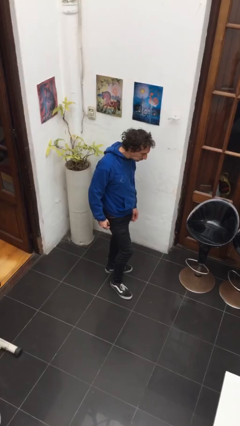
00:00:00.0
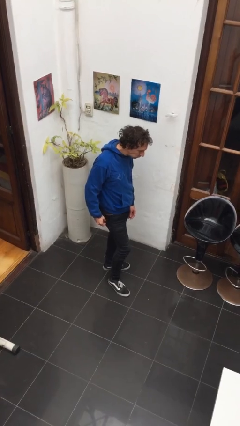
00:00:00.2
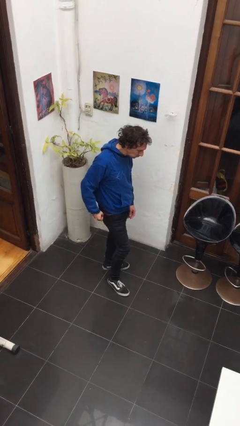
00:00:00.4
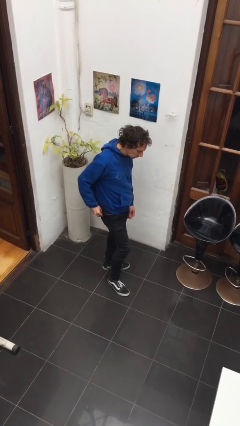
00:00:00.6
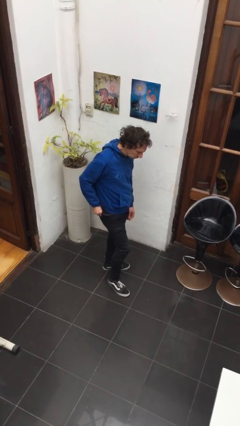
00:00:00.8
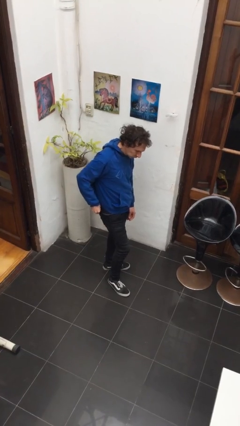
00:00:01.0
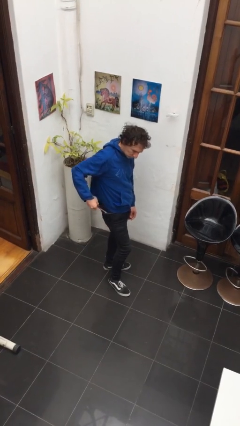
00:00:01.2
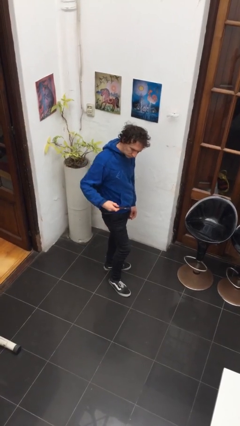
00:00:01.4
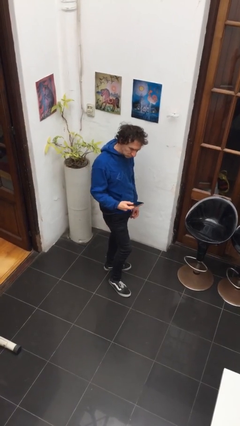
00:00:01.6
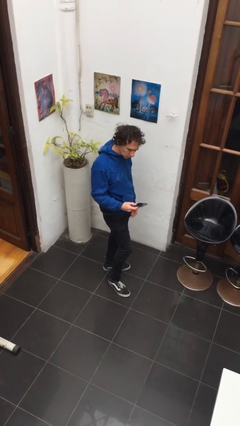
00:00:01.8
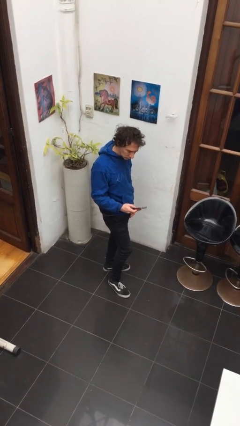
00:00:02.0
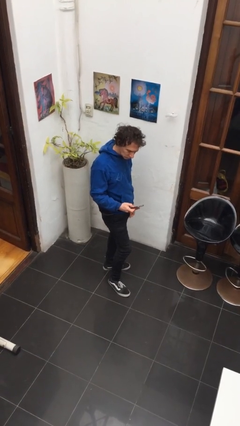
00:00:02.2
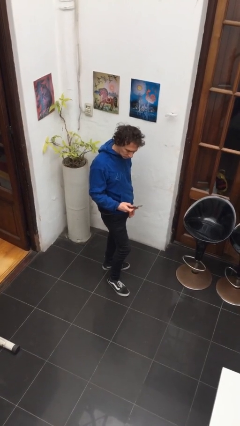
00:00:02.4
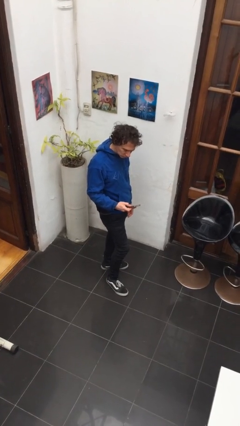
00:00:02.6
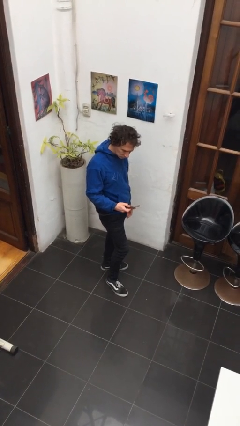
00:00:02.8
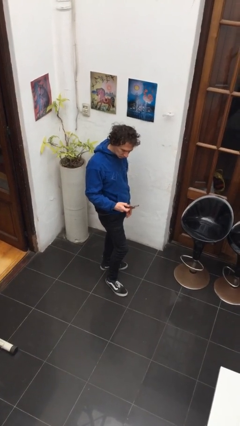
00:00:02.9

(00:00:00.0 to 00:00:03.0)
person takes phone from pocket

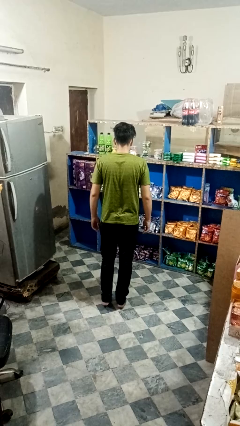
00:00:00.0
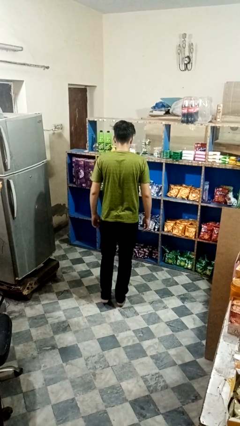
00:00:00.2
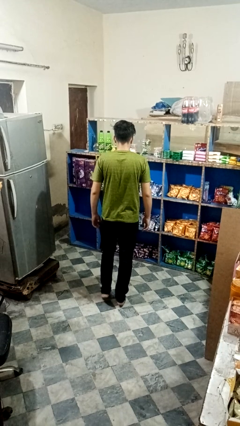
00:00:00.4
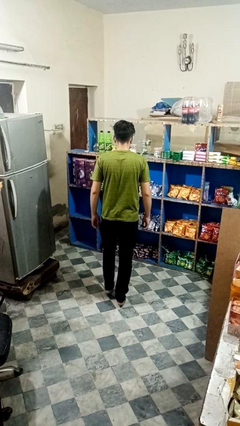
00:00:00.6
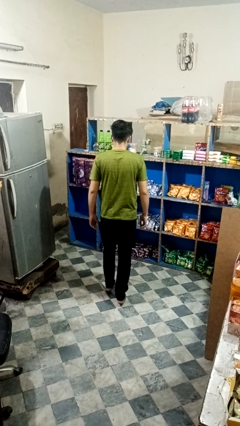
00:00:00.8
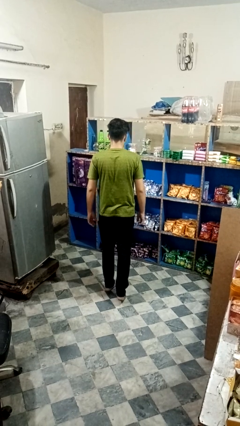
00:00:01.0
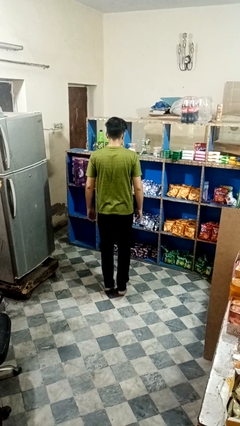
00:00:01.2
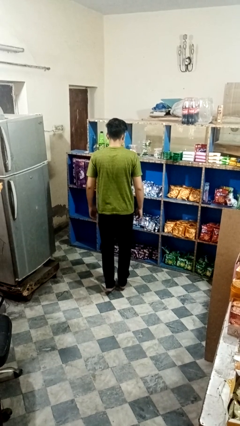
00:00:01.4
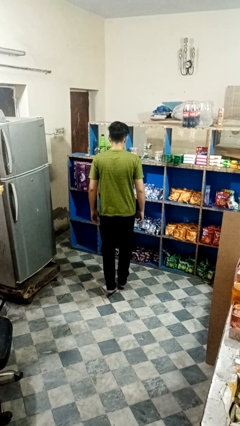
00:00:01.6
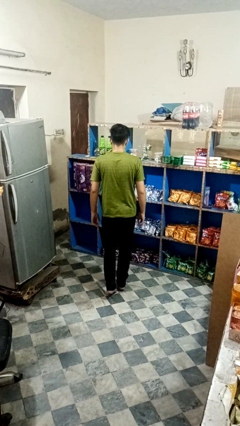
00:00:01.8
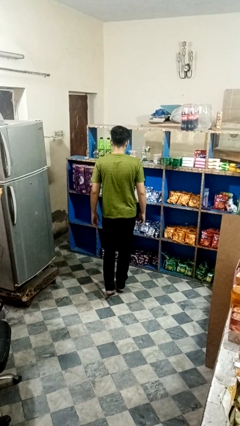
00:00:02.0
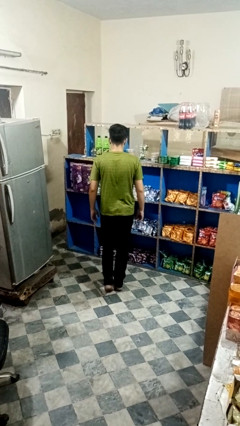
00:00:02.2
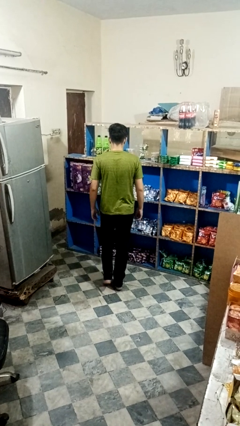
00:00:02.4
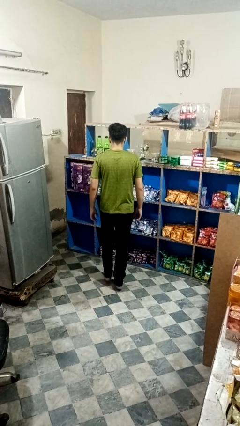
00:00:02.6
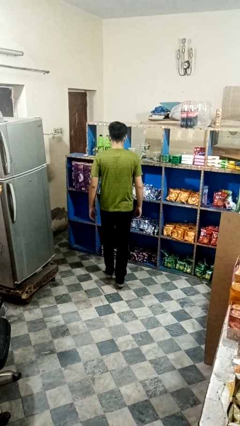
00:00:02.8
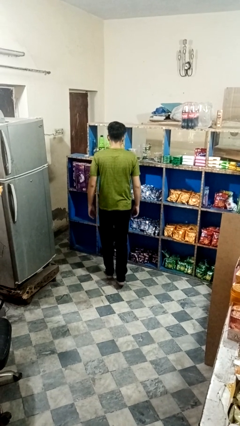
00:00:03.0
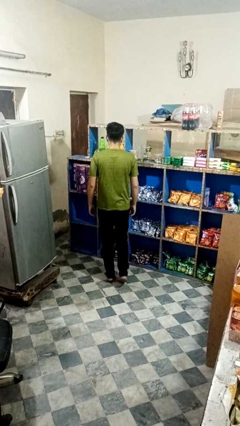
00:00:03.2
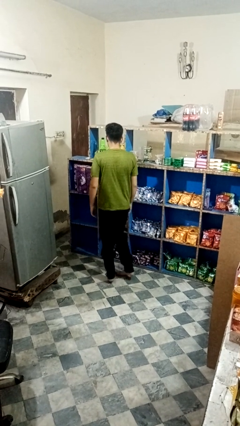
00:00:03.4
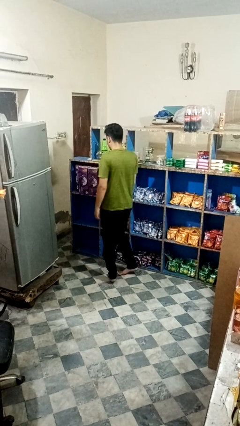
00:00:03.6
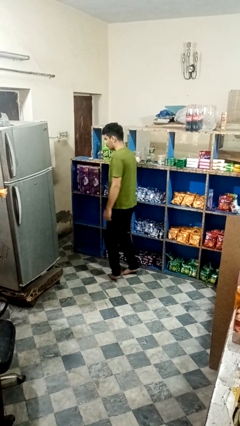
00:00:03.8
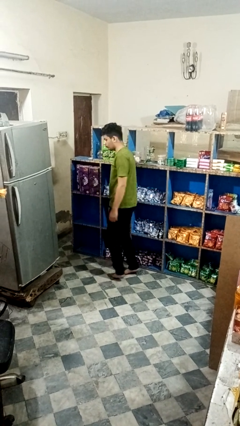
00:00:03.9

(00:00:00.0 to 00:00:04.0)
person walks tiptoe

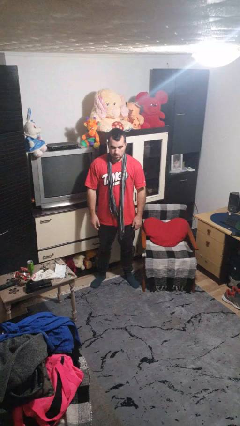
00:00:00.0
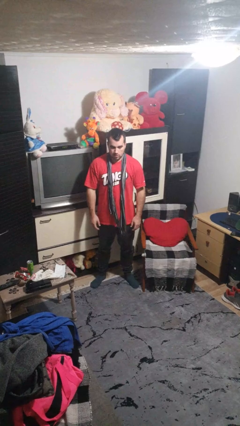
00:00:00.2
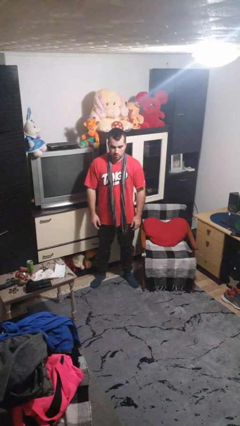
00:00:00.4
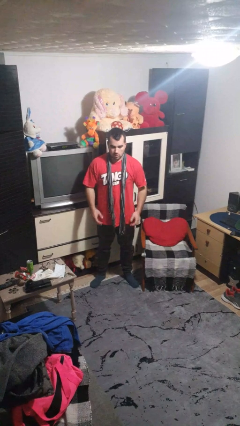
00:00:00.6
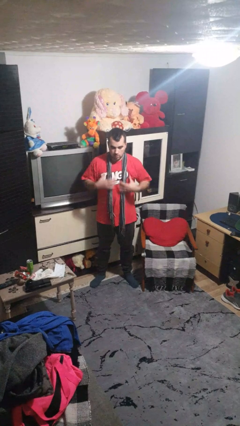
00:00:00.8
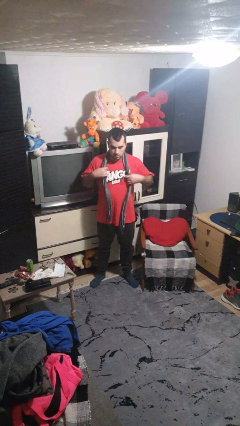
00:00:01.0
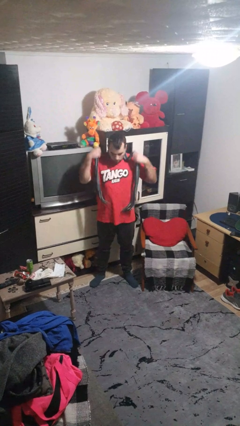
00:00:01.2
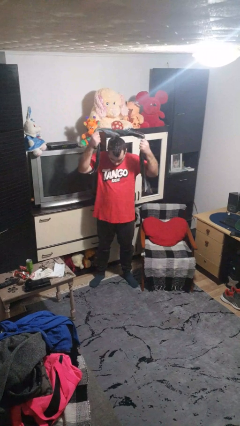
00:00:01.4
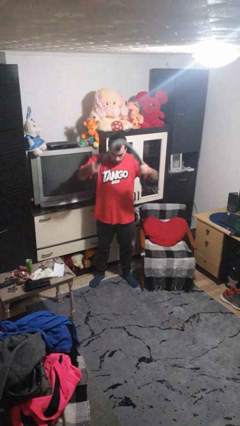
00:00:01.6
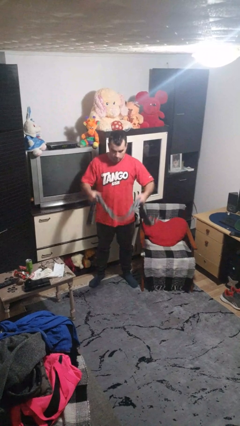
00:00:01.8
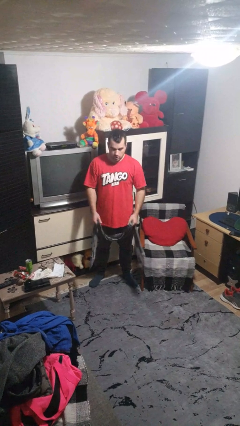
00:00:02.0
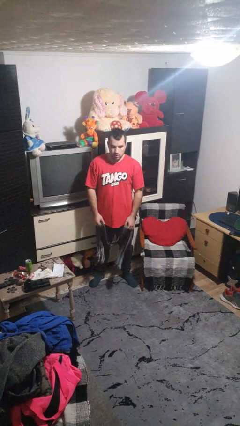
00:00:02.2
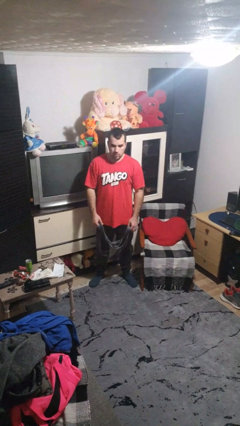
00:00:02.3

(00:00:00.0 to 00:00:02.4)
person takes off scarf

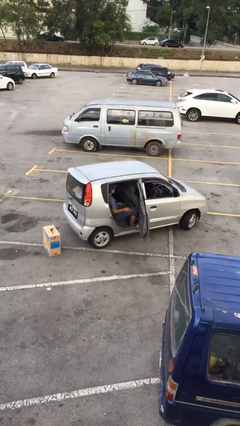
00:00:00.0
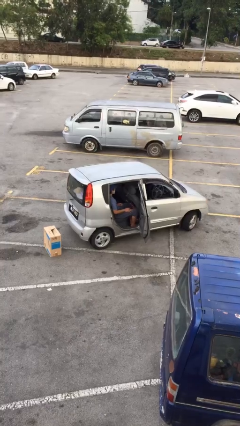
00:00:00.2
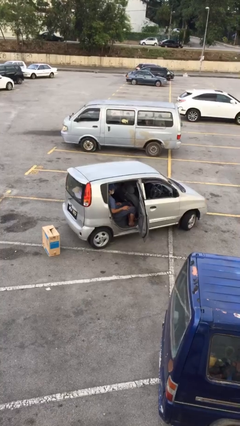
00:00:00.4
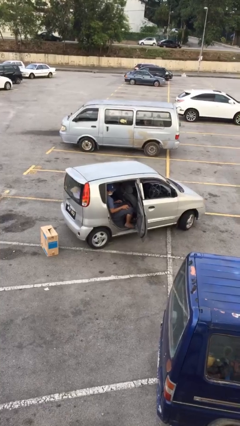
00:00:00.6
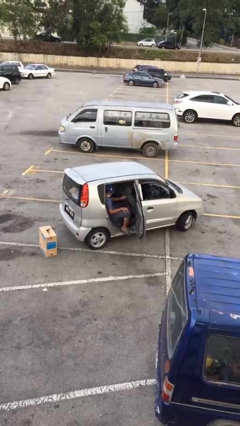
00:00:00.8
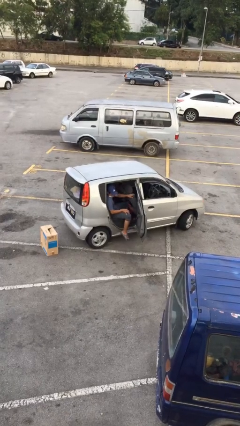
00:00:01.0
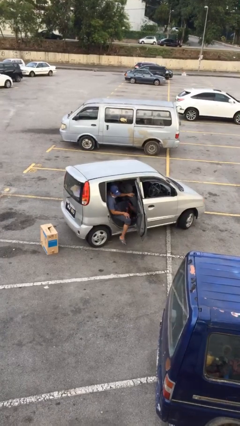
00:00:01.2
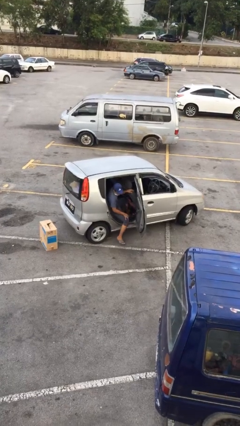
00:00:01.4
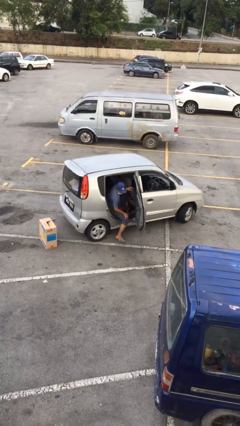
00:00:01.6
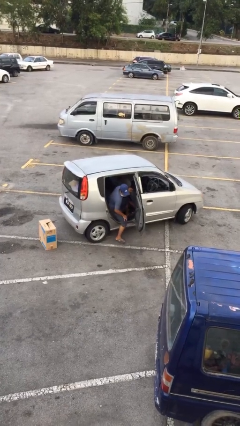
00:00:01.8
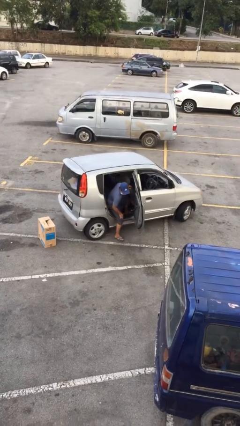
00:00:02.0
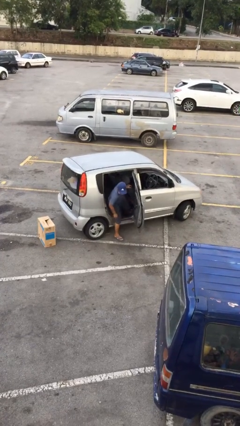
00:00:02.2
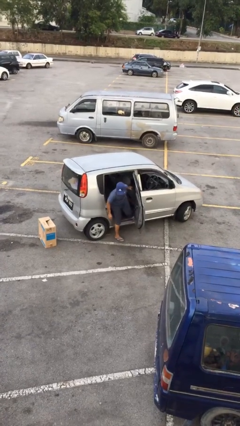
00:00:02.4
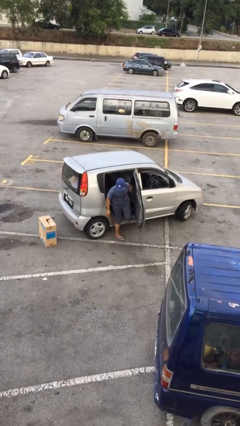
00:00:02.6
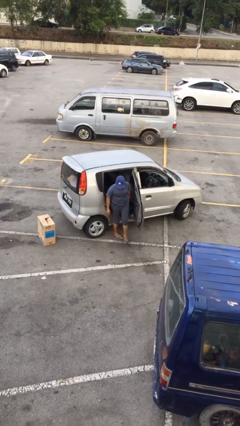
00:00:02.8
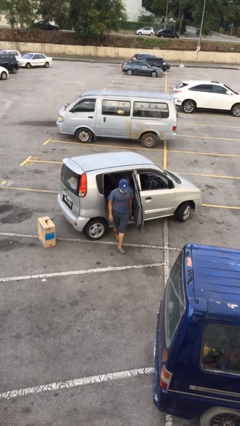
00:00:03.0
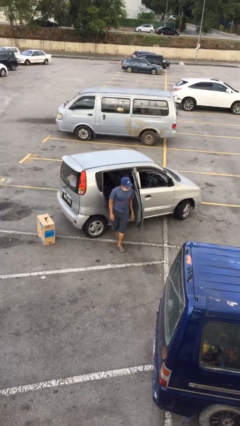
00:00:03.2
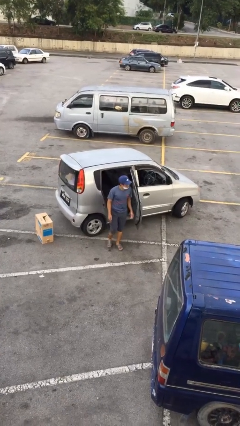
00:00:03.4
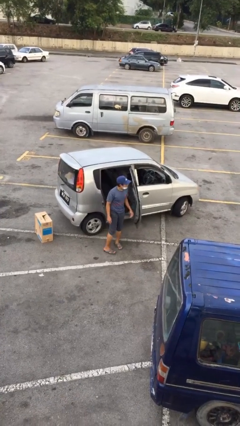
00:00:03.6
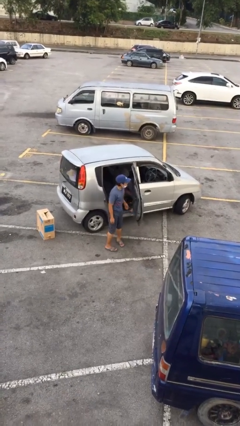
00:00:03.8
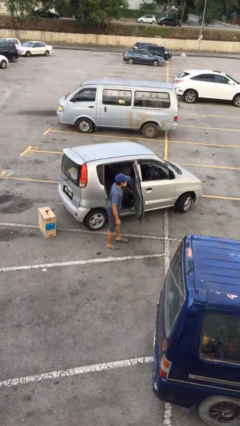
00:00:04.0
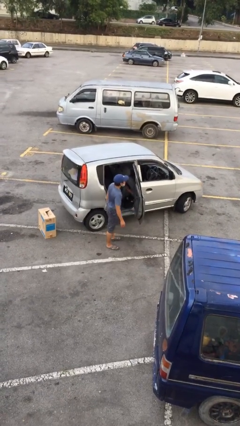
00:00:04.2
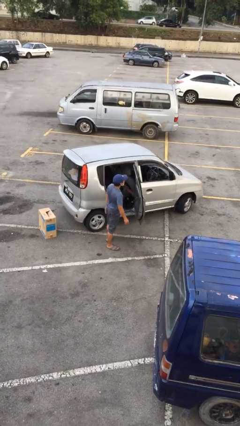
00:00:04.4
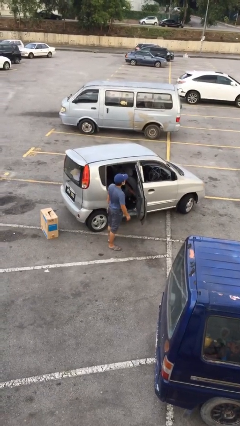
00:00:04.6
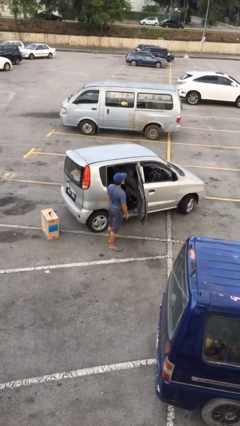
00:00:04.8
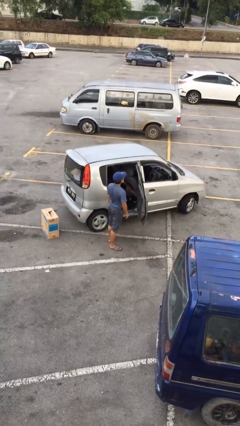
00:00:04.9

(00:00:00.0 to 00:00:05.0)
person exits car

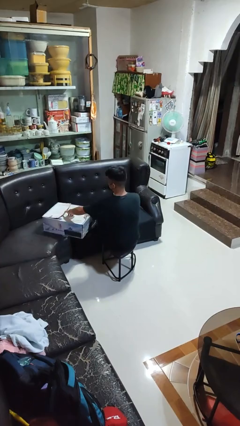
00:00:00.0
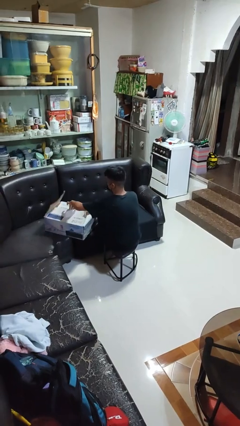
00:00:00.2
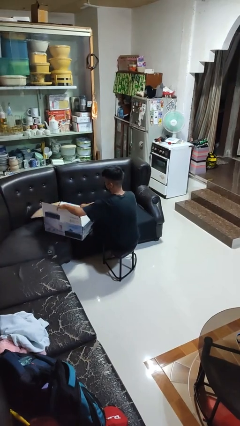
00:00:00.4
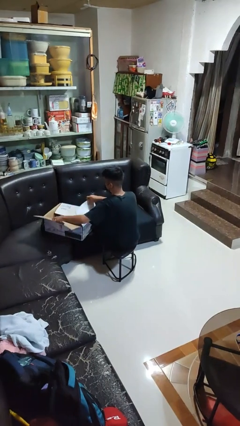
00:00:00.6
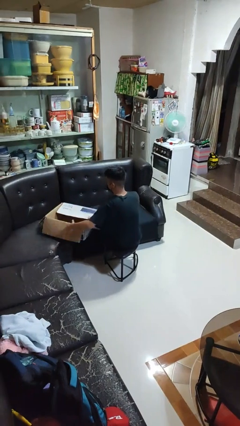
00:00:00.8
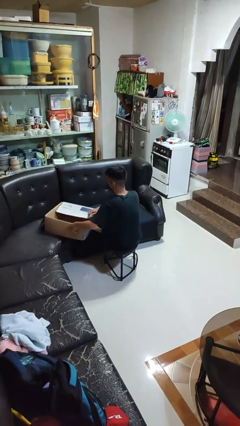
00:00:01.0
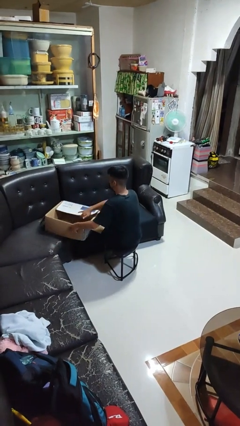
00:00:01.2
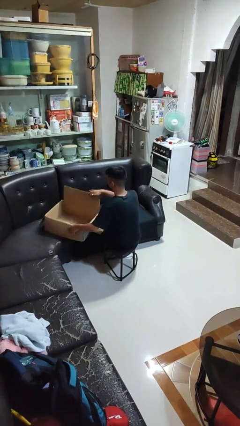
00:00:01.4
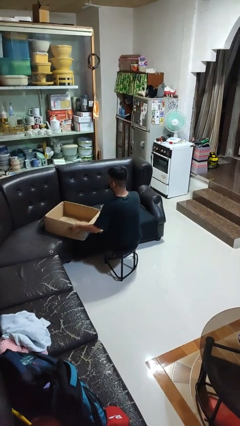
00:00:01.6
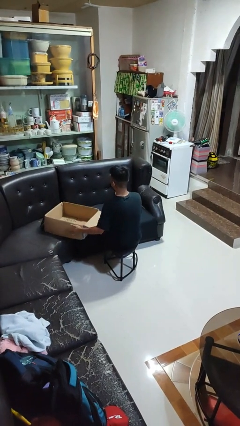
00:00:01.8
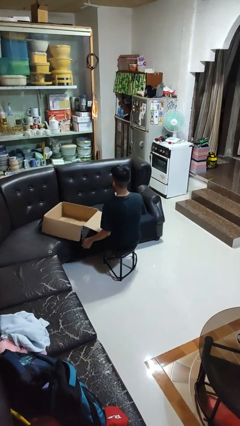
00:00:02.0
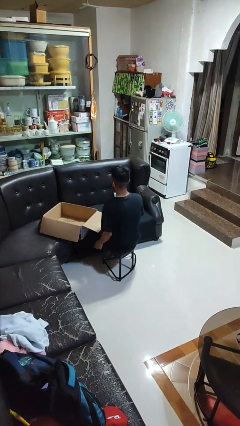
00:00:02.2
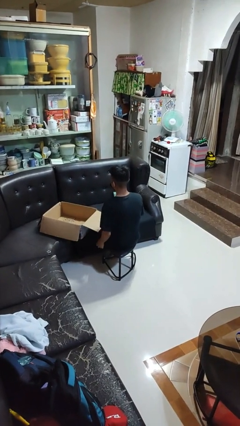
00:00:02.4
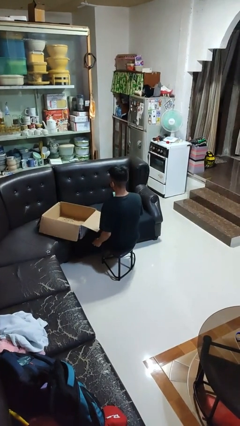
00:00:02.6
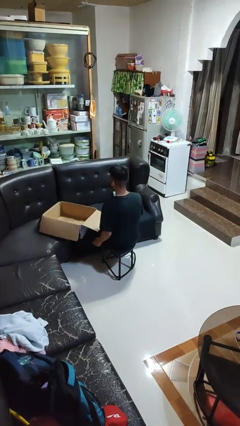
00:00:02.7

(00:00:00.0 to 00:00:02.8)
person opens box
